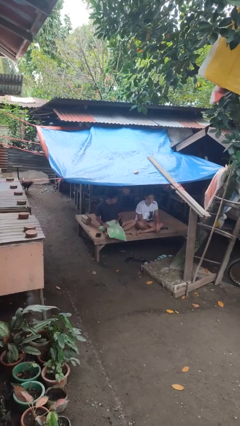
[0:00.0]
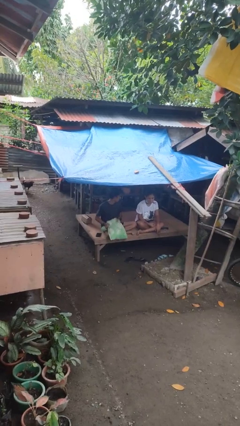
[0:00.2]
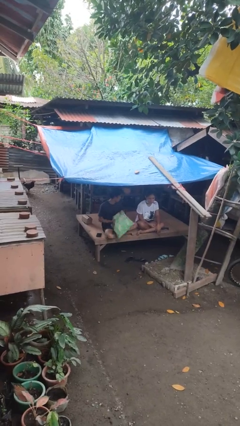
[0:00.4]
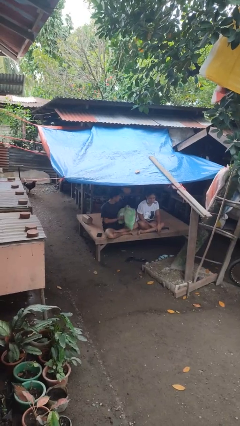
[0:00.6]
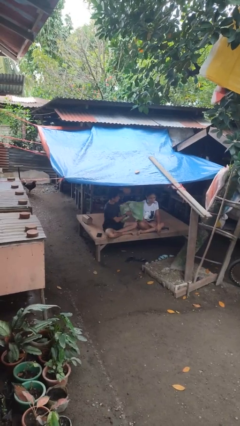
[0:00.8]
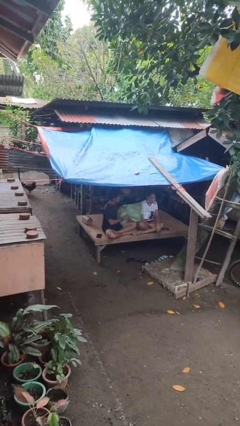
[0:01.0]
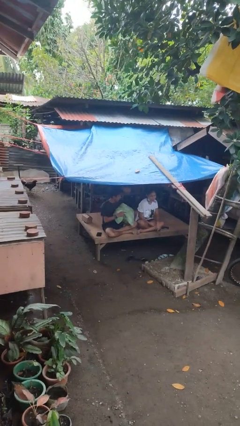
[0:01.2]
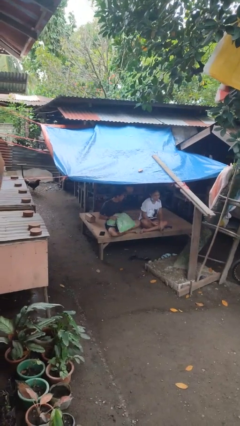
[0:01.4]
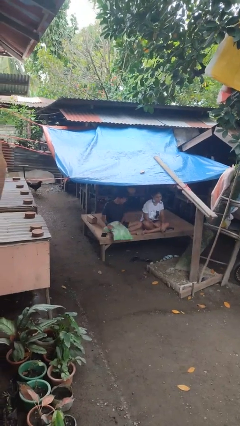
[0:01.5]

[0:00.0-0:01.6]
person hits person with pillow

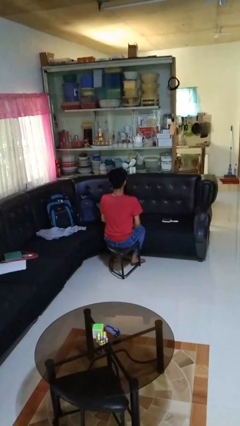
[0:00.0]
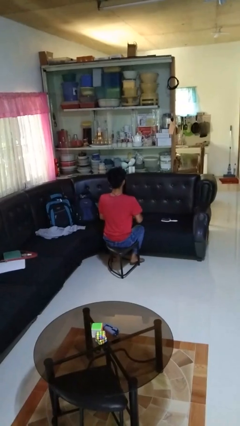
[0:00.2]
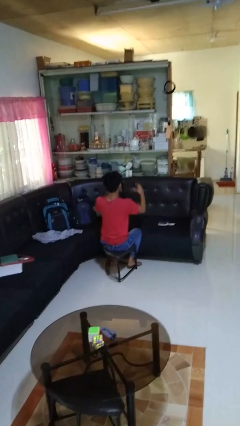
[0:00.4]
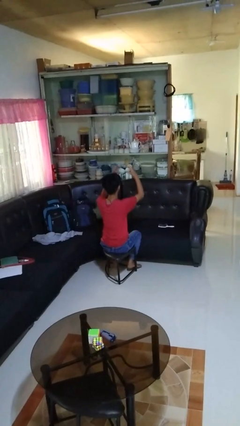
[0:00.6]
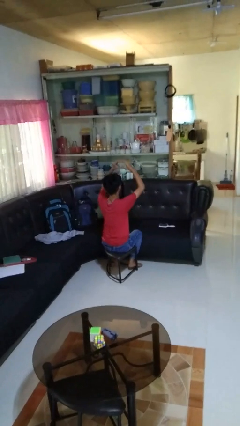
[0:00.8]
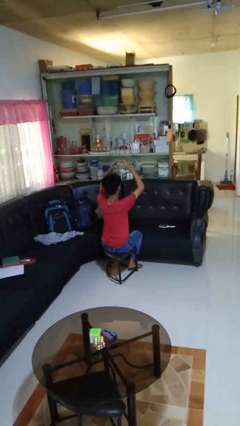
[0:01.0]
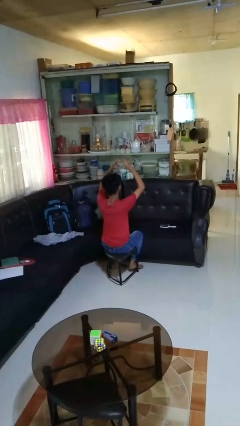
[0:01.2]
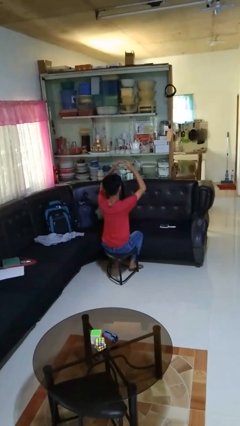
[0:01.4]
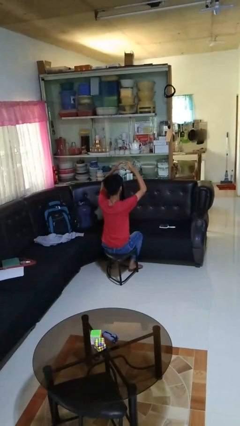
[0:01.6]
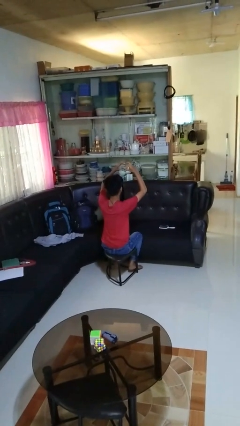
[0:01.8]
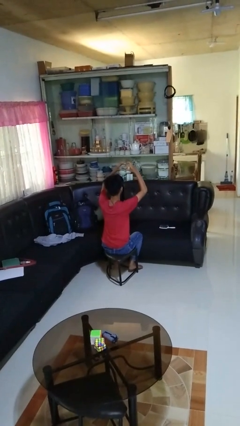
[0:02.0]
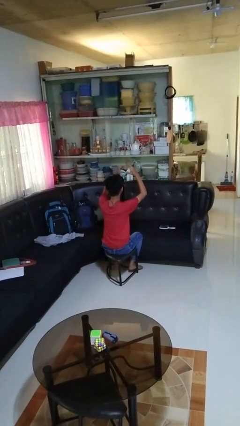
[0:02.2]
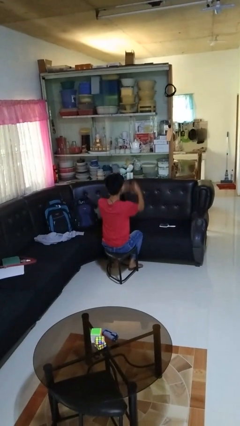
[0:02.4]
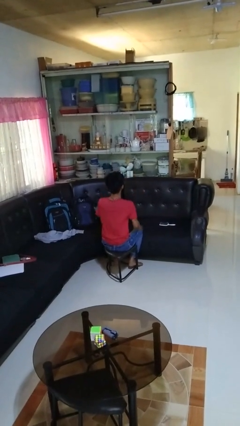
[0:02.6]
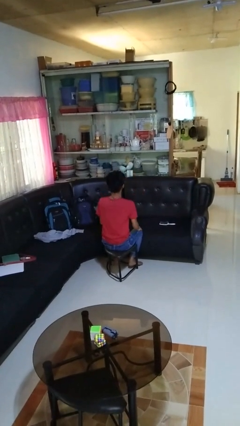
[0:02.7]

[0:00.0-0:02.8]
person gestures heart

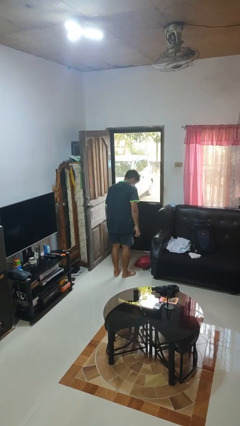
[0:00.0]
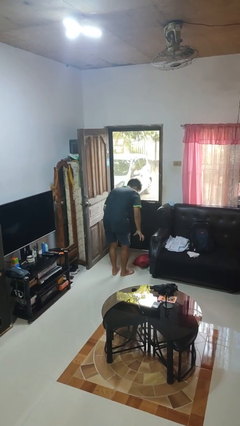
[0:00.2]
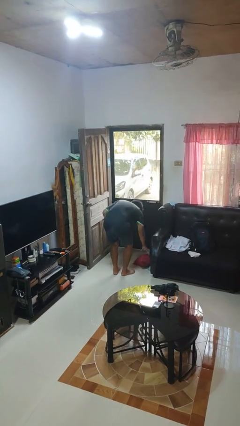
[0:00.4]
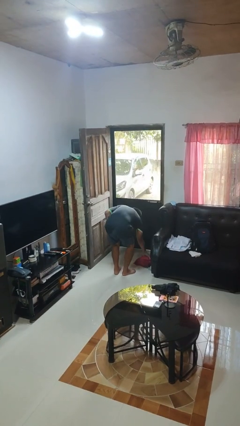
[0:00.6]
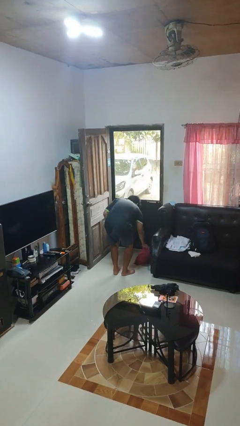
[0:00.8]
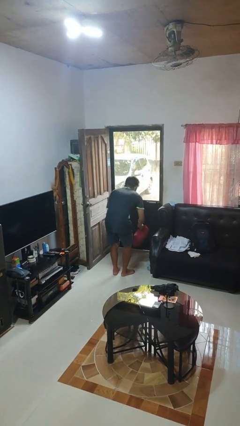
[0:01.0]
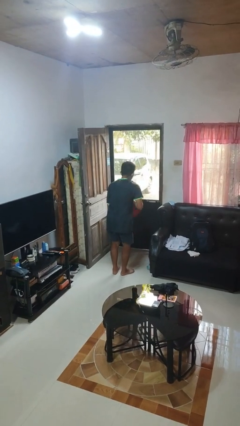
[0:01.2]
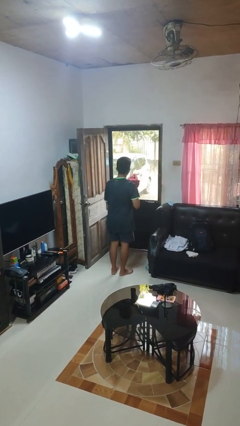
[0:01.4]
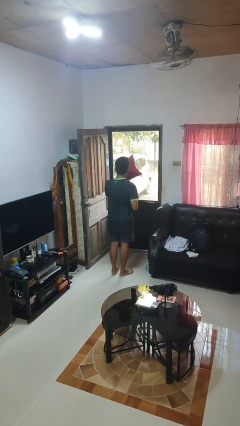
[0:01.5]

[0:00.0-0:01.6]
person picks up object from floor

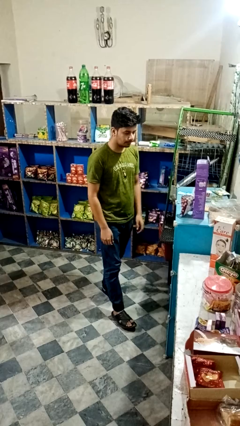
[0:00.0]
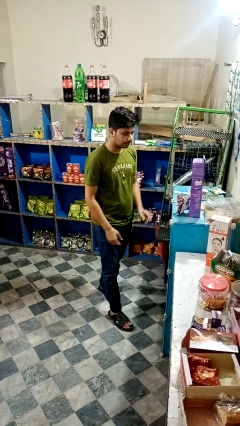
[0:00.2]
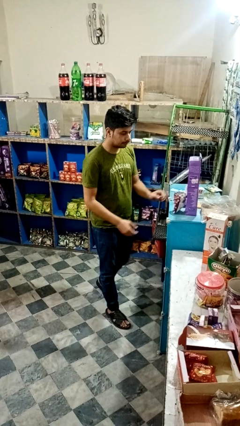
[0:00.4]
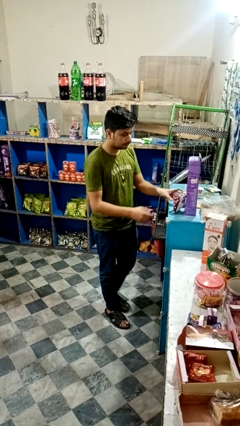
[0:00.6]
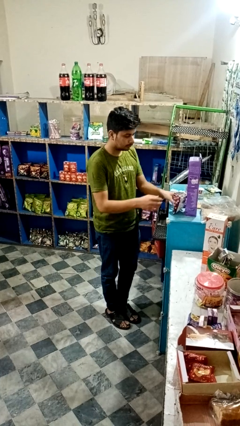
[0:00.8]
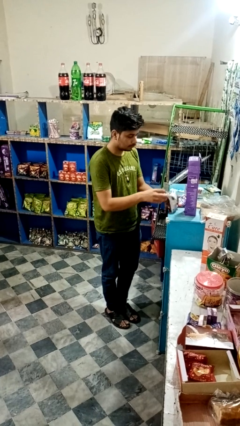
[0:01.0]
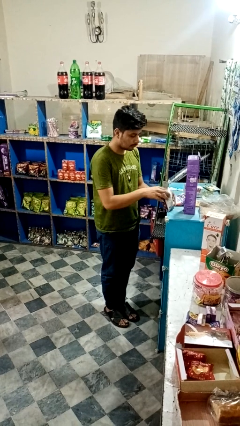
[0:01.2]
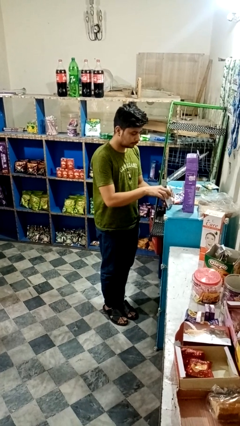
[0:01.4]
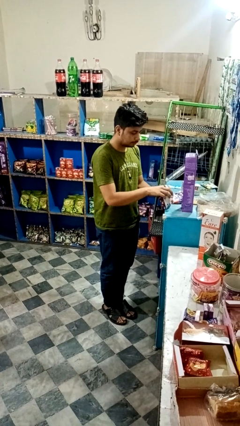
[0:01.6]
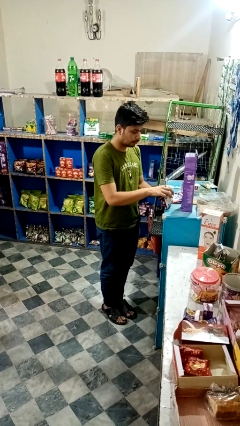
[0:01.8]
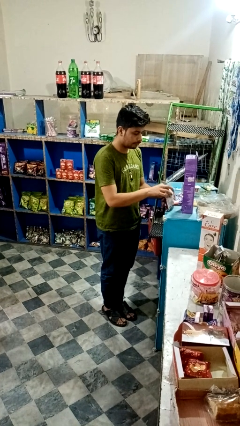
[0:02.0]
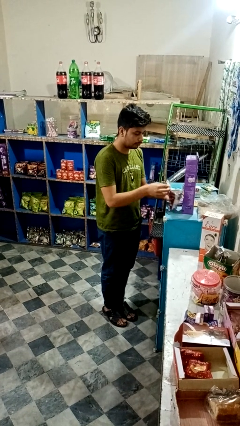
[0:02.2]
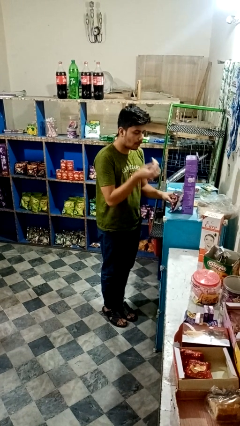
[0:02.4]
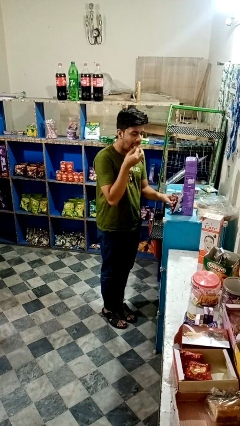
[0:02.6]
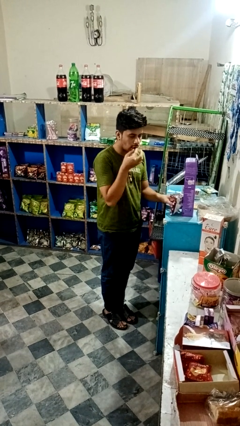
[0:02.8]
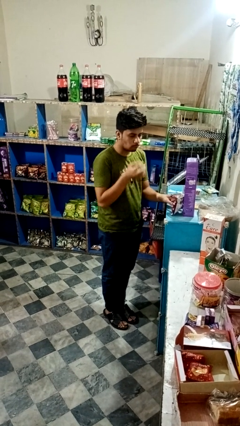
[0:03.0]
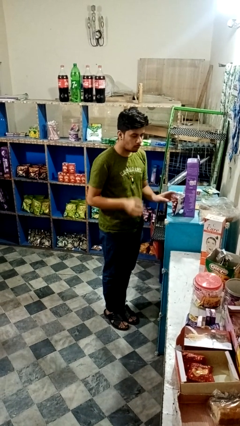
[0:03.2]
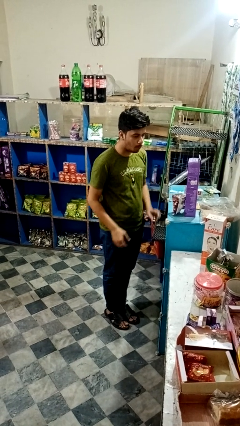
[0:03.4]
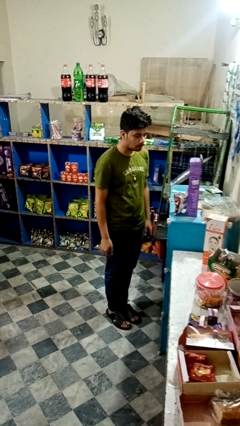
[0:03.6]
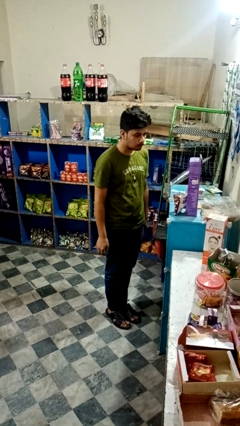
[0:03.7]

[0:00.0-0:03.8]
person eats snack from bag

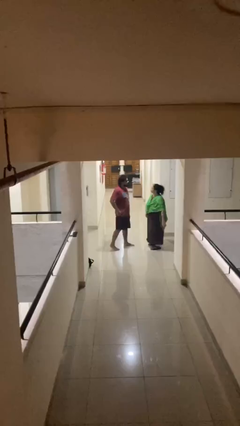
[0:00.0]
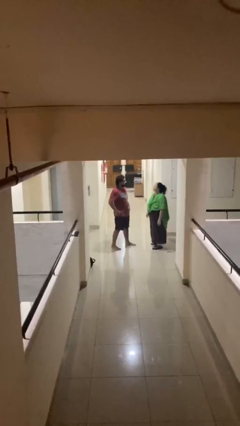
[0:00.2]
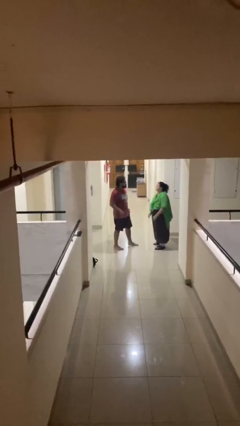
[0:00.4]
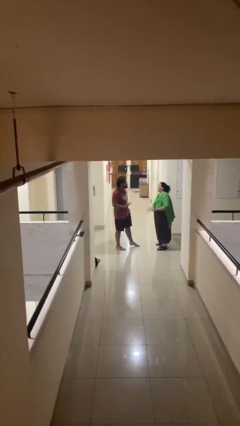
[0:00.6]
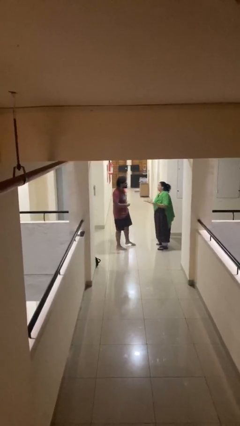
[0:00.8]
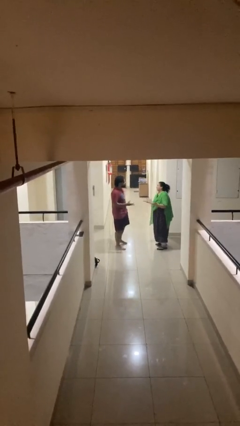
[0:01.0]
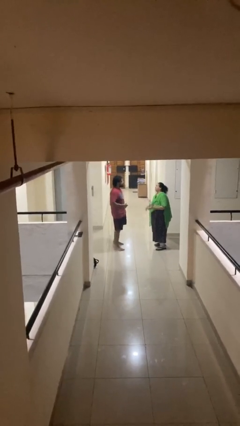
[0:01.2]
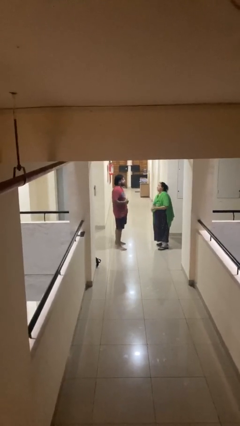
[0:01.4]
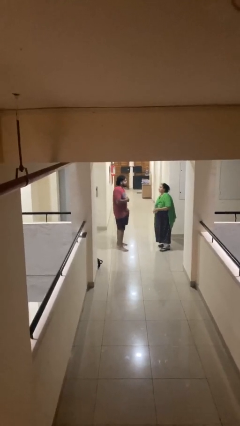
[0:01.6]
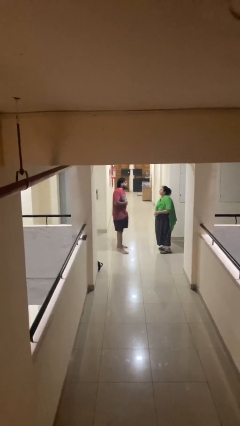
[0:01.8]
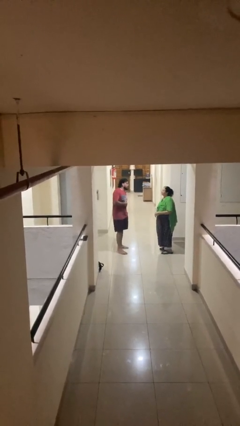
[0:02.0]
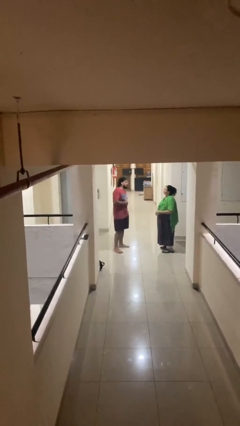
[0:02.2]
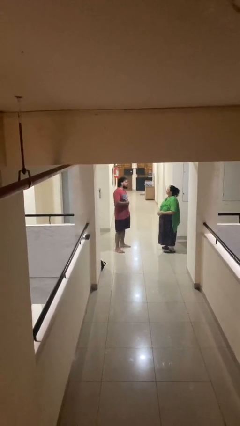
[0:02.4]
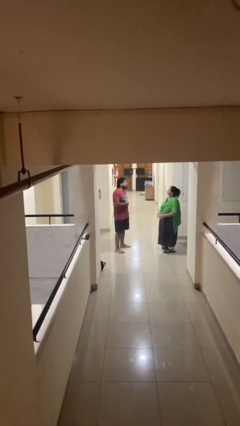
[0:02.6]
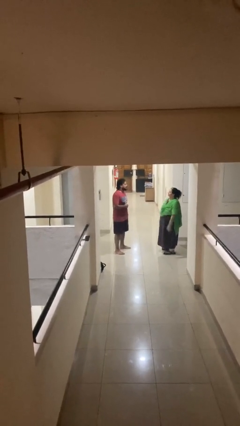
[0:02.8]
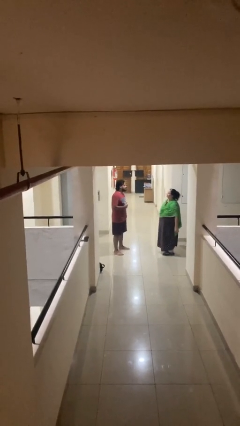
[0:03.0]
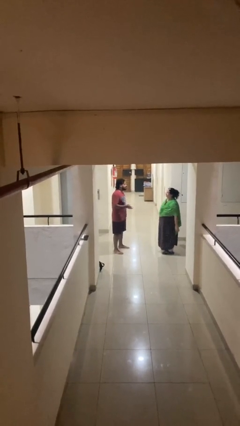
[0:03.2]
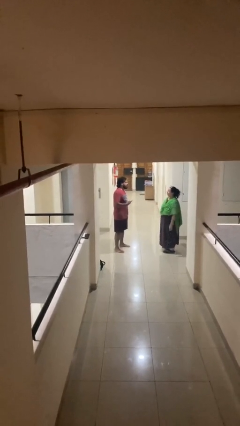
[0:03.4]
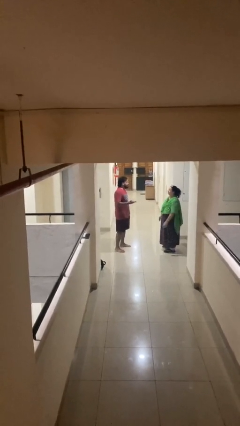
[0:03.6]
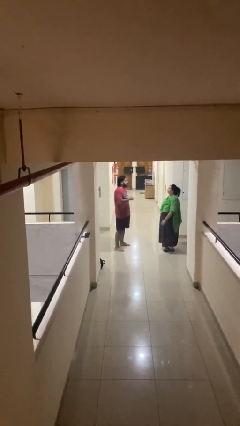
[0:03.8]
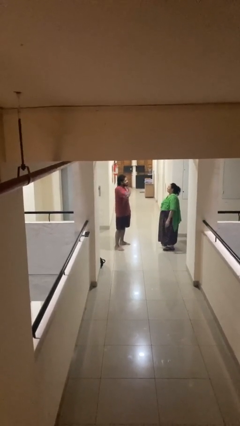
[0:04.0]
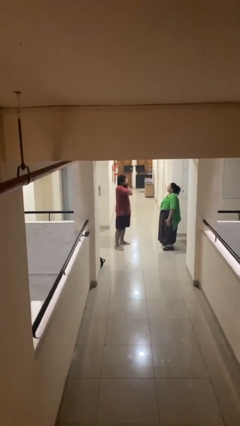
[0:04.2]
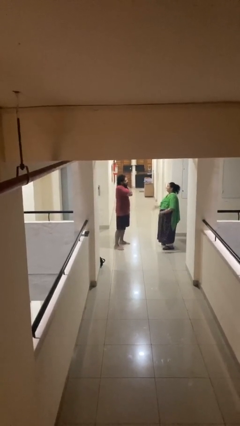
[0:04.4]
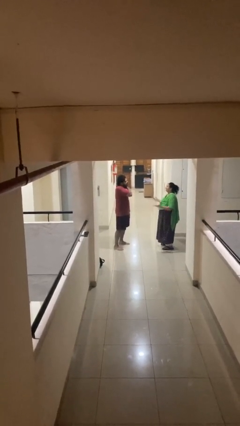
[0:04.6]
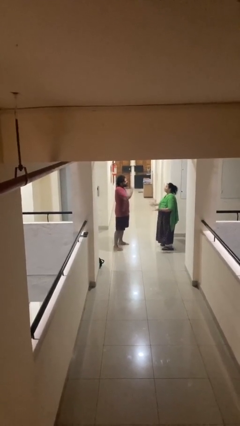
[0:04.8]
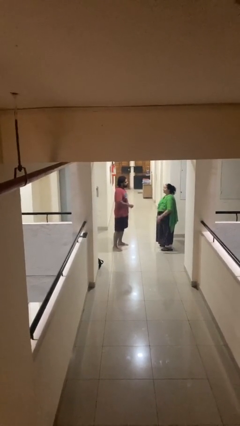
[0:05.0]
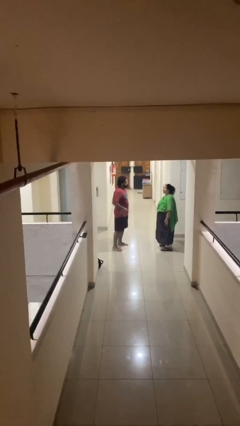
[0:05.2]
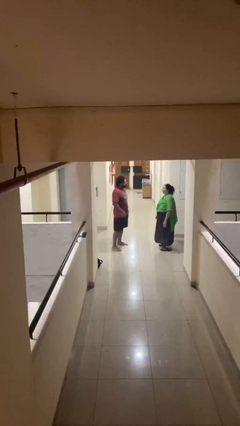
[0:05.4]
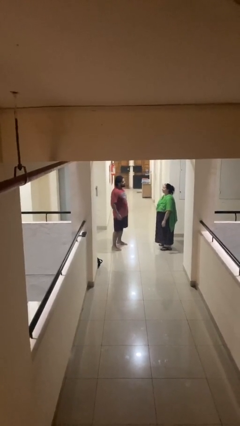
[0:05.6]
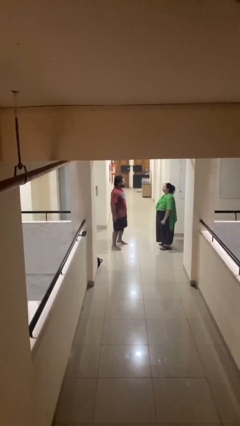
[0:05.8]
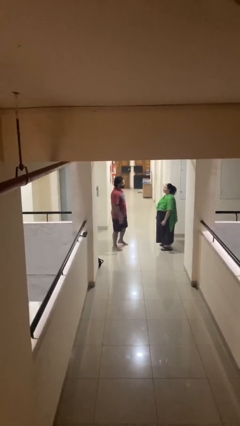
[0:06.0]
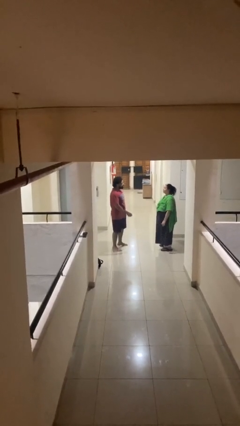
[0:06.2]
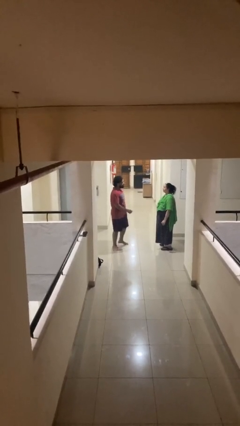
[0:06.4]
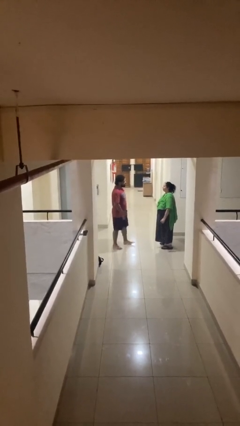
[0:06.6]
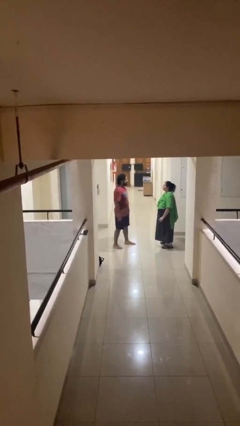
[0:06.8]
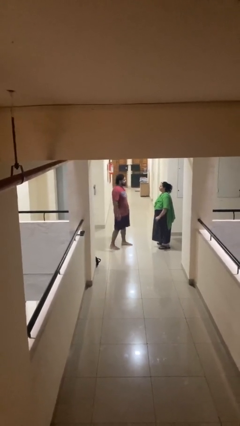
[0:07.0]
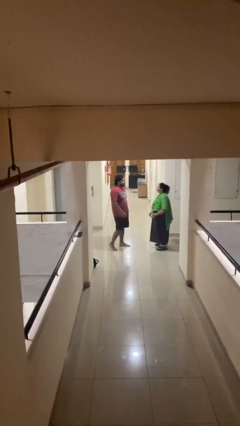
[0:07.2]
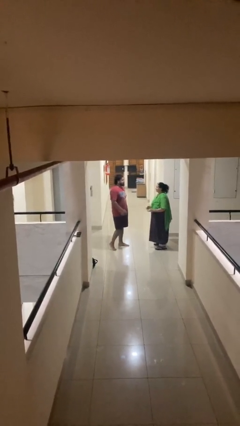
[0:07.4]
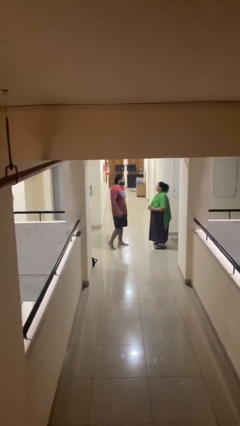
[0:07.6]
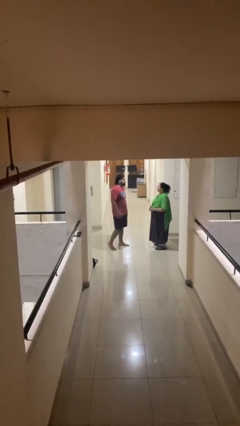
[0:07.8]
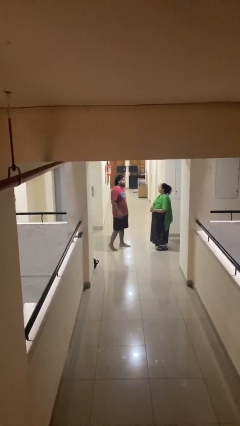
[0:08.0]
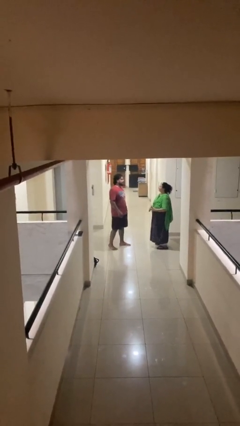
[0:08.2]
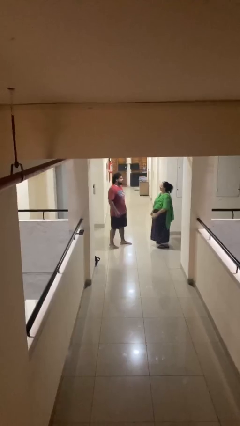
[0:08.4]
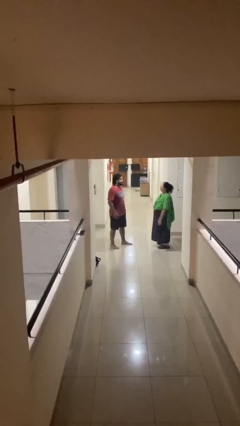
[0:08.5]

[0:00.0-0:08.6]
person talks to person
